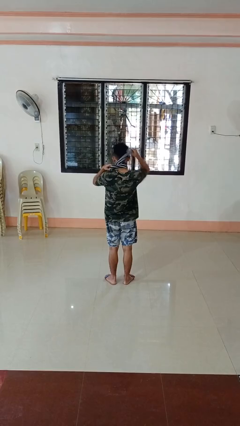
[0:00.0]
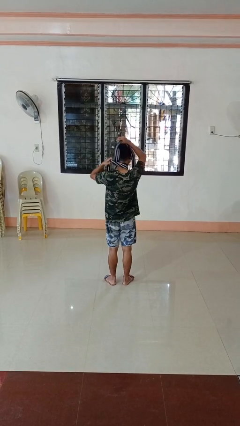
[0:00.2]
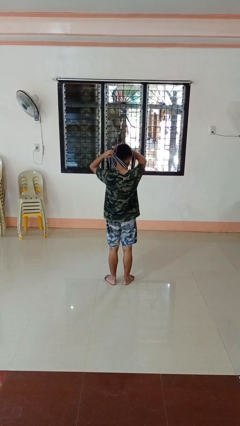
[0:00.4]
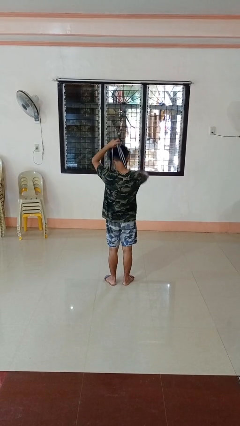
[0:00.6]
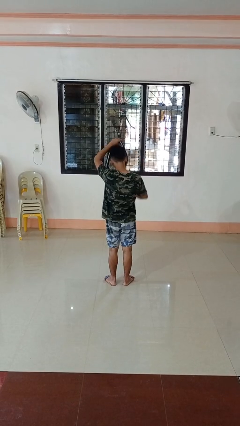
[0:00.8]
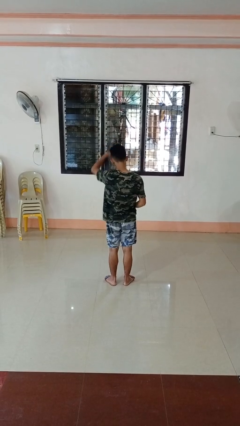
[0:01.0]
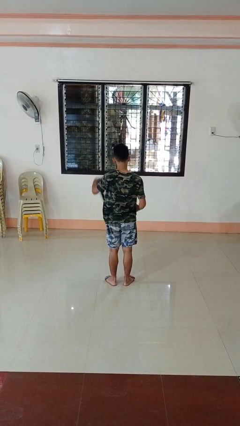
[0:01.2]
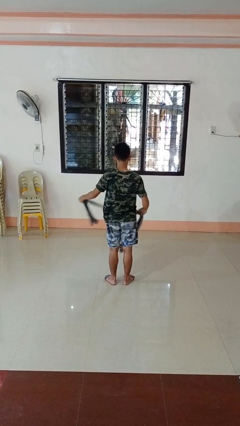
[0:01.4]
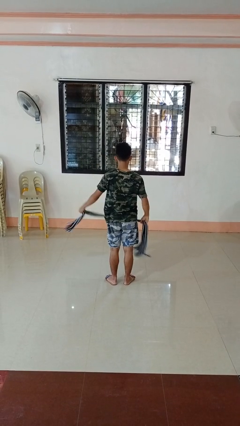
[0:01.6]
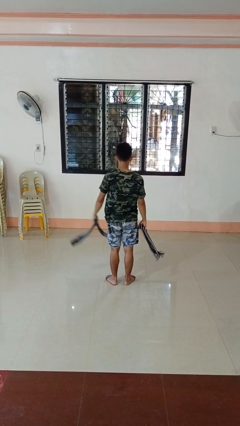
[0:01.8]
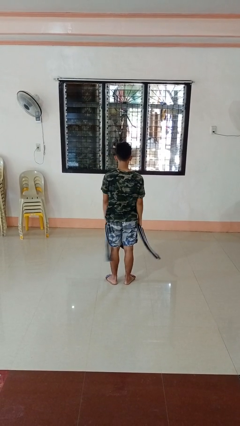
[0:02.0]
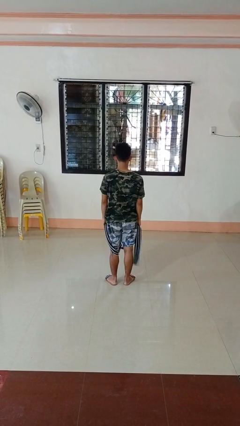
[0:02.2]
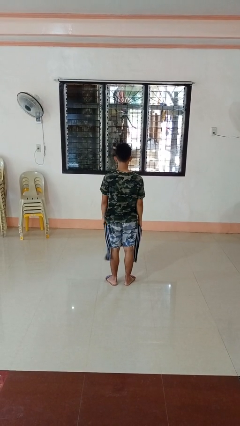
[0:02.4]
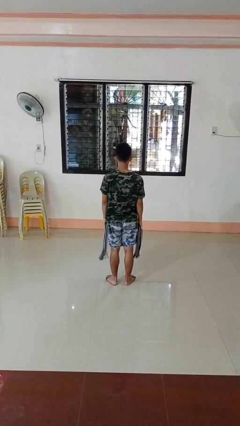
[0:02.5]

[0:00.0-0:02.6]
person takes off scarf

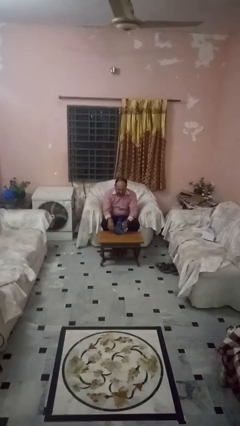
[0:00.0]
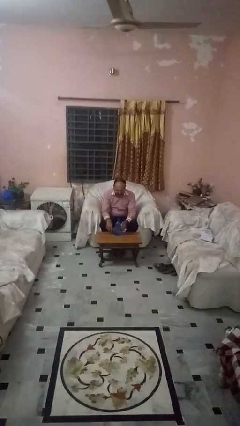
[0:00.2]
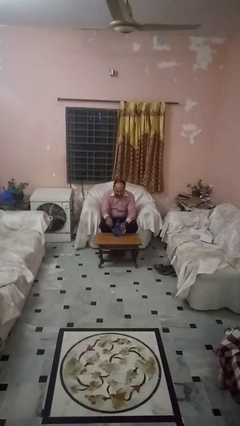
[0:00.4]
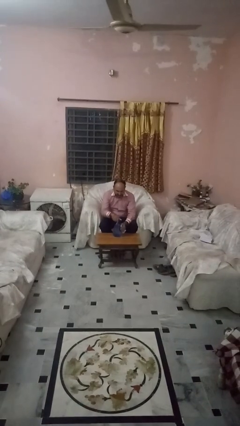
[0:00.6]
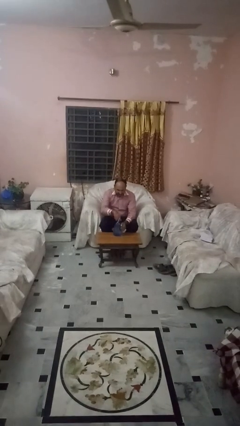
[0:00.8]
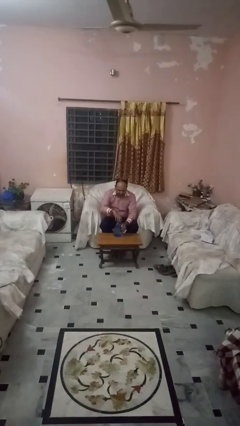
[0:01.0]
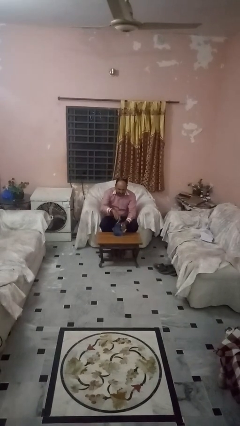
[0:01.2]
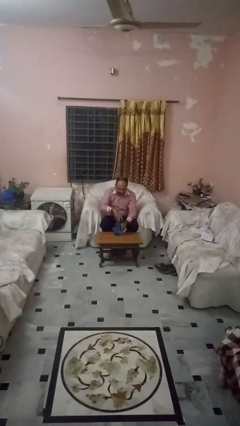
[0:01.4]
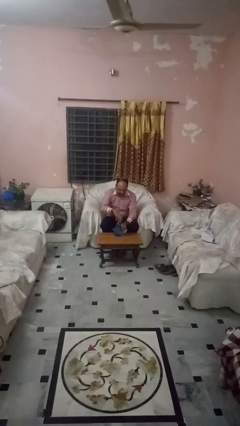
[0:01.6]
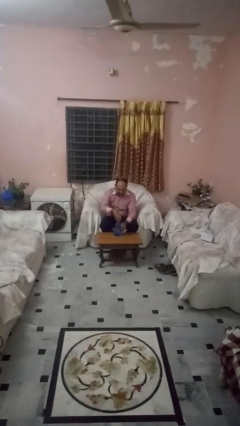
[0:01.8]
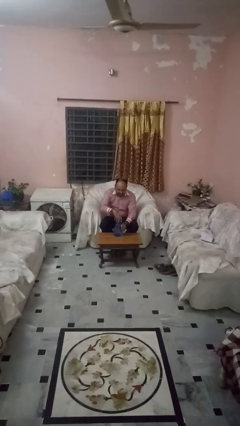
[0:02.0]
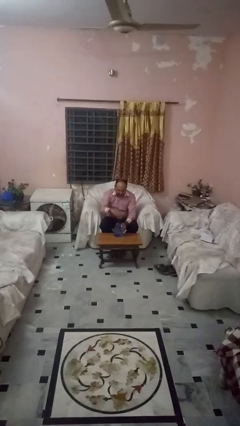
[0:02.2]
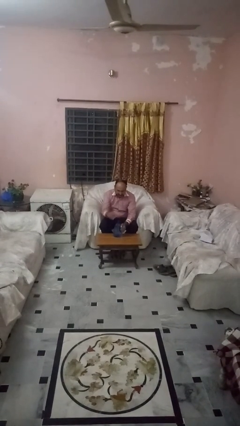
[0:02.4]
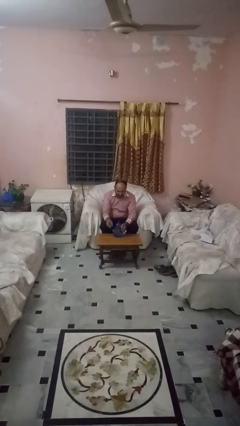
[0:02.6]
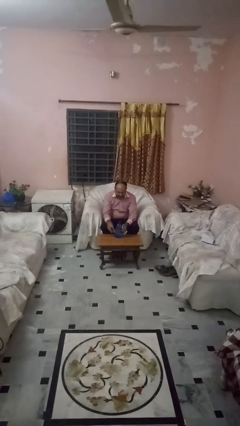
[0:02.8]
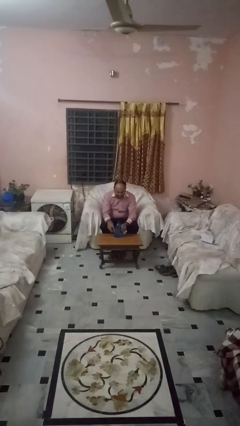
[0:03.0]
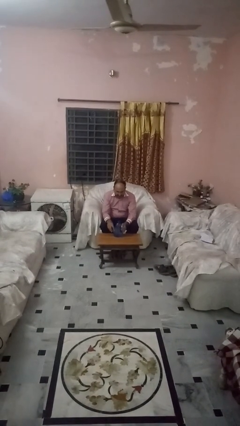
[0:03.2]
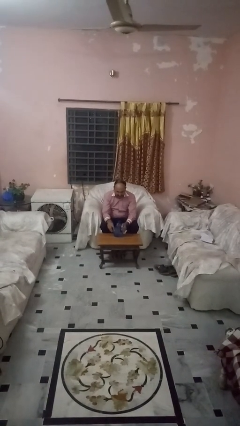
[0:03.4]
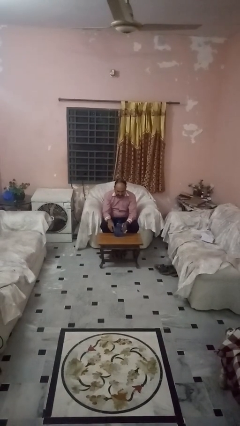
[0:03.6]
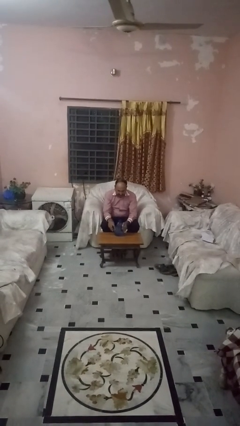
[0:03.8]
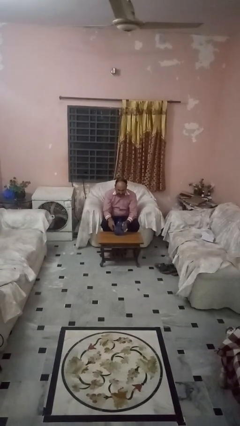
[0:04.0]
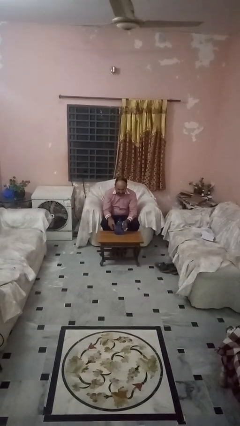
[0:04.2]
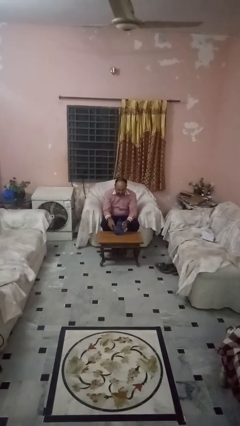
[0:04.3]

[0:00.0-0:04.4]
person unscrews lid from bottle

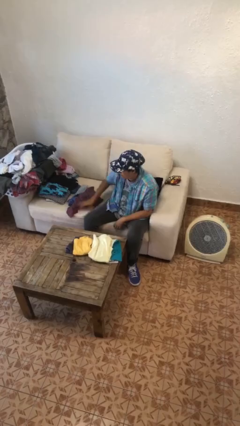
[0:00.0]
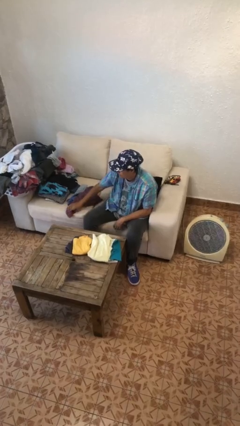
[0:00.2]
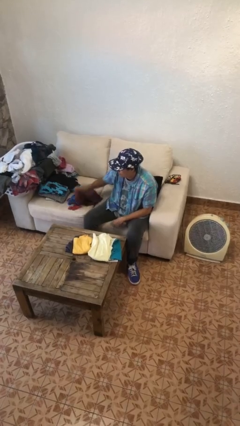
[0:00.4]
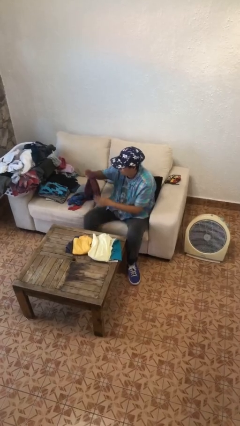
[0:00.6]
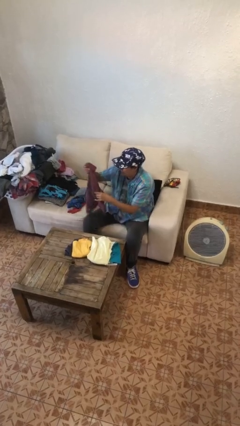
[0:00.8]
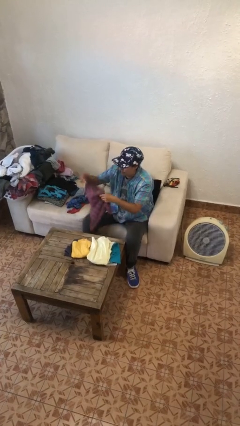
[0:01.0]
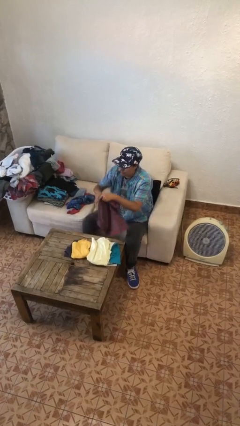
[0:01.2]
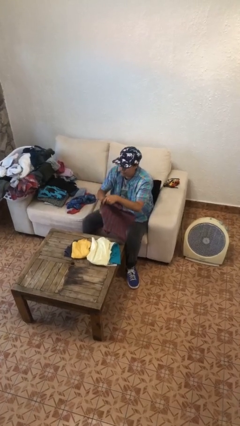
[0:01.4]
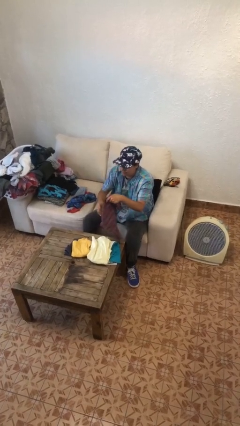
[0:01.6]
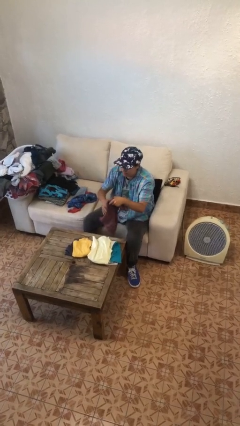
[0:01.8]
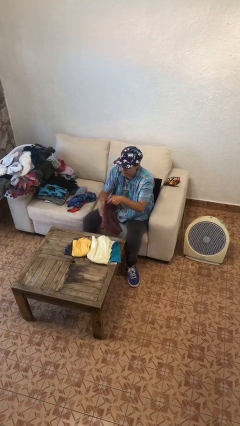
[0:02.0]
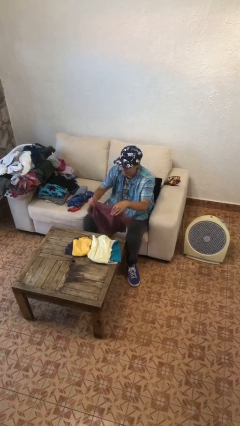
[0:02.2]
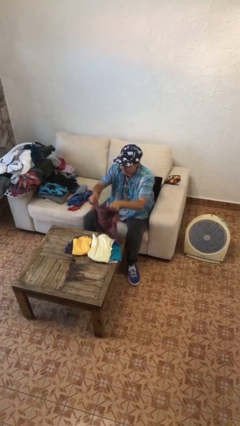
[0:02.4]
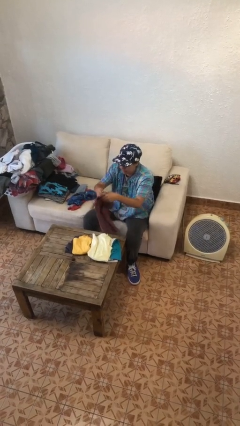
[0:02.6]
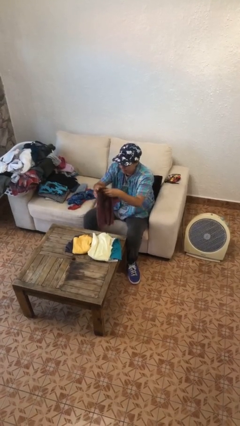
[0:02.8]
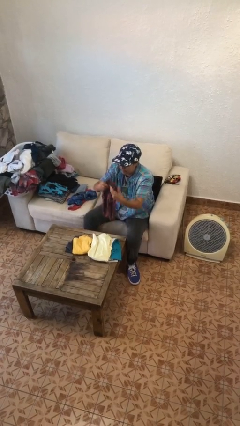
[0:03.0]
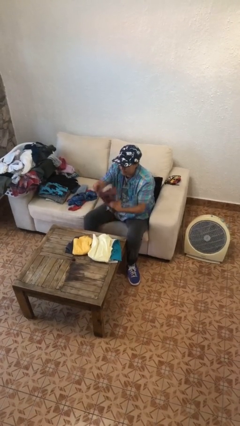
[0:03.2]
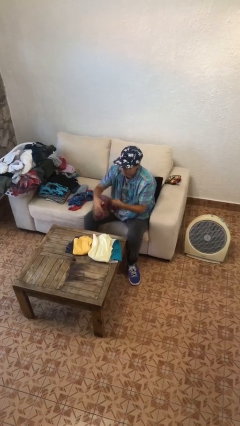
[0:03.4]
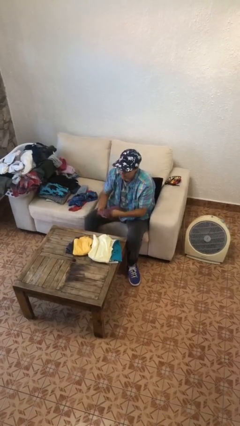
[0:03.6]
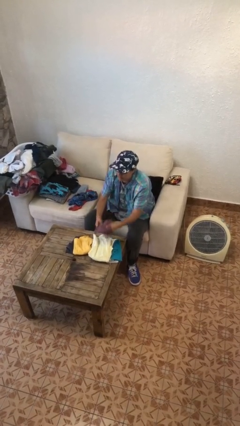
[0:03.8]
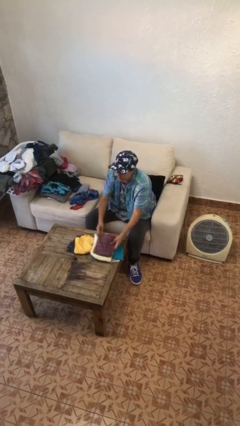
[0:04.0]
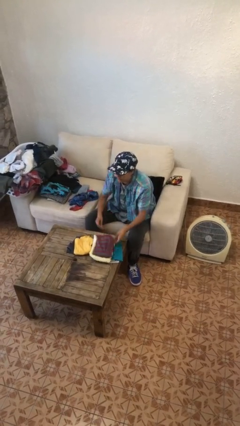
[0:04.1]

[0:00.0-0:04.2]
person folds shirt

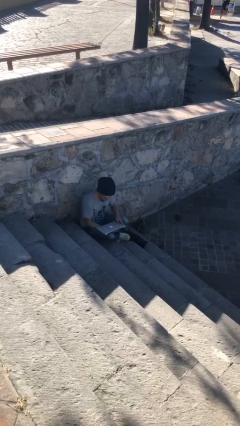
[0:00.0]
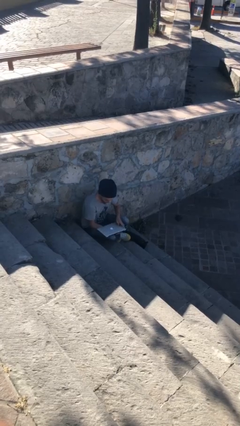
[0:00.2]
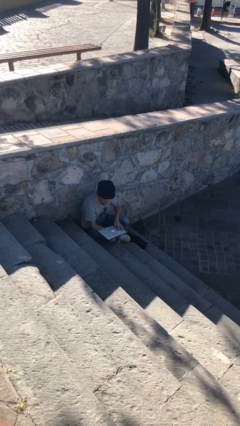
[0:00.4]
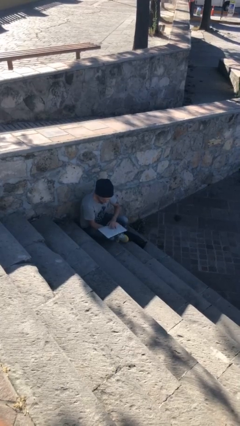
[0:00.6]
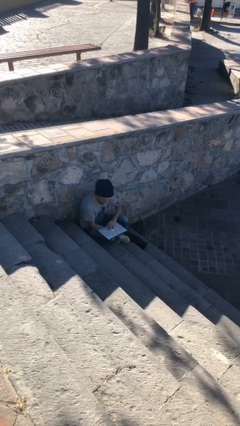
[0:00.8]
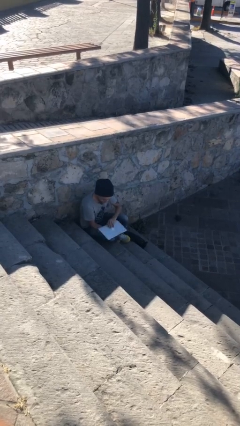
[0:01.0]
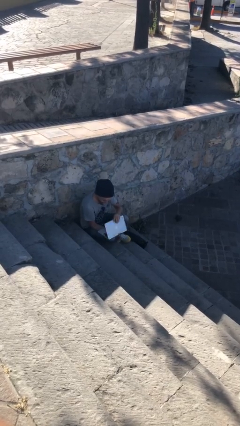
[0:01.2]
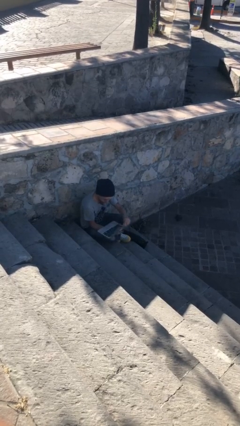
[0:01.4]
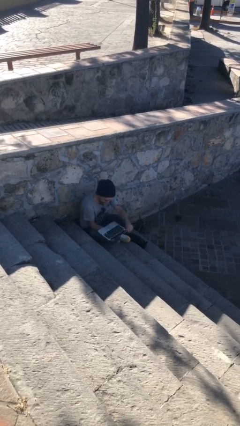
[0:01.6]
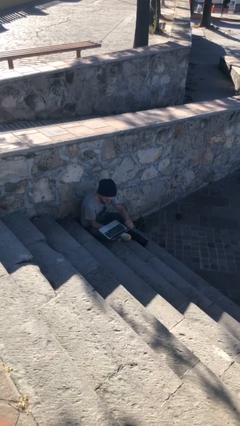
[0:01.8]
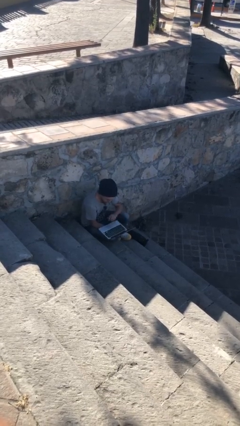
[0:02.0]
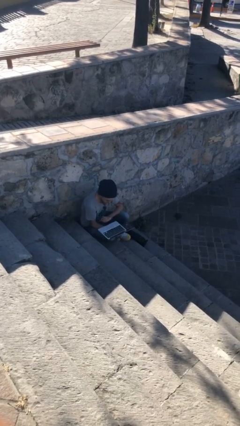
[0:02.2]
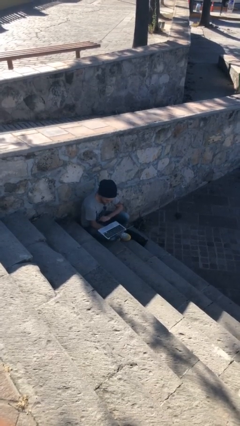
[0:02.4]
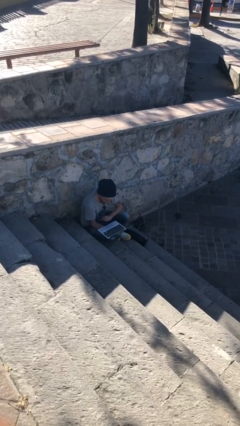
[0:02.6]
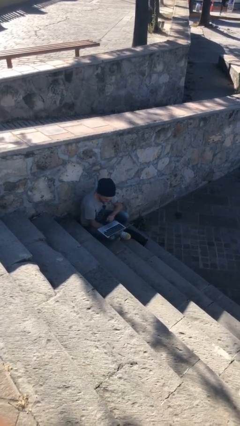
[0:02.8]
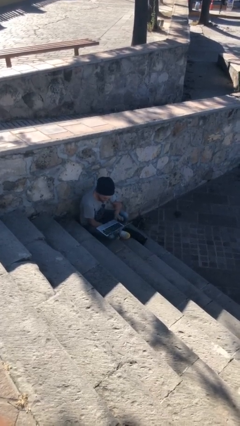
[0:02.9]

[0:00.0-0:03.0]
person interacts with laptop

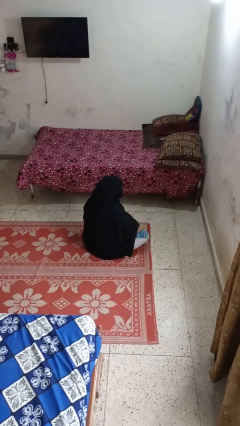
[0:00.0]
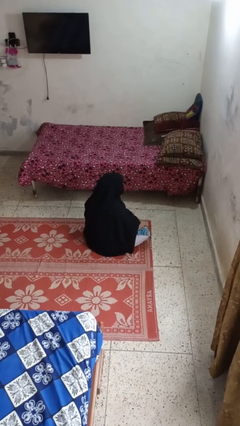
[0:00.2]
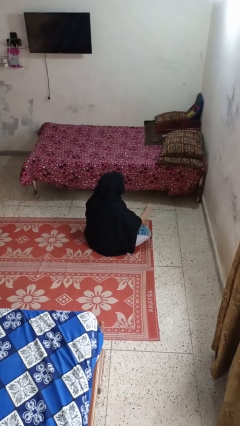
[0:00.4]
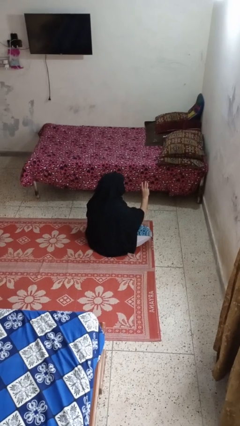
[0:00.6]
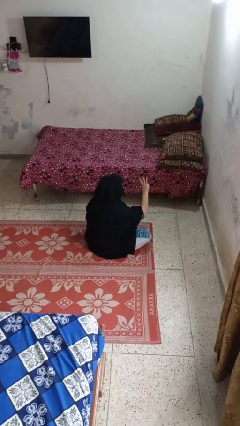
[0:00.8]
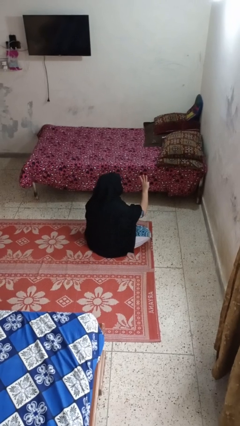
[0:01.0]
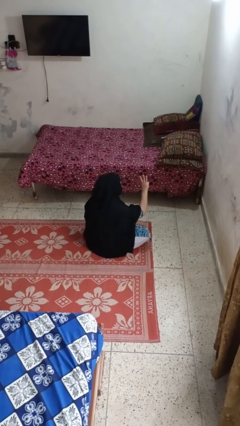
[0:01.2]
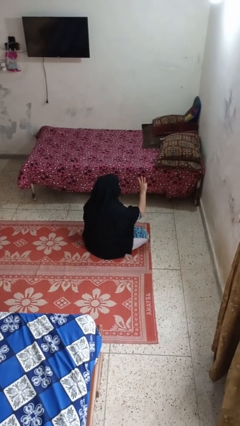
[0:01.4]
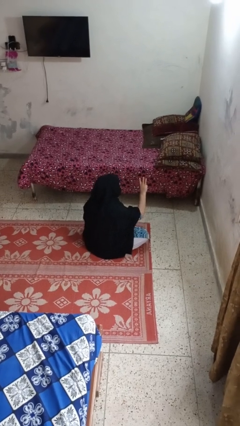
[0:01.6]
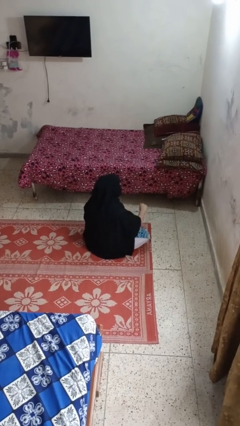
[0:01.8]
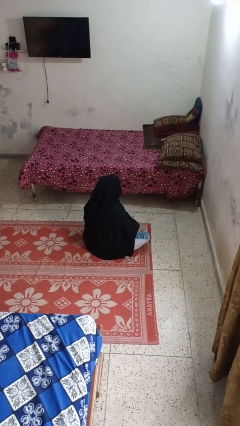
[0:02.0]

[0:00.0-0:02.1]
person gestures number three

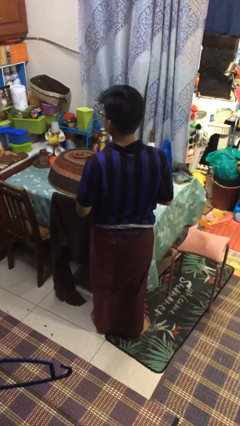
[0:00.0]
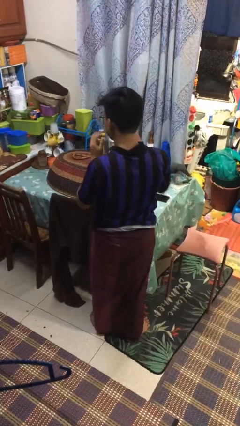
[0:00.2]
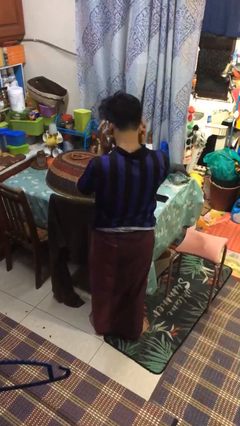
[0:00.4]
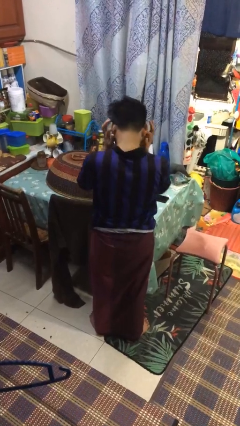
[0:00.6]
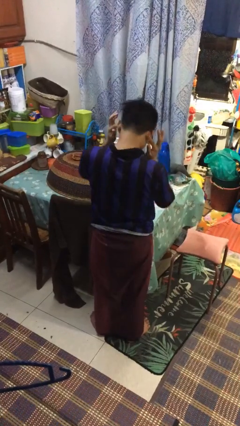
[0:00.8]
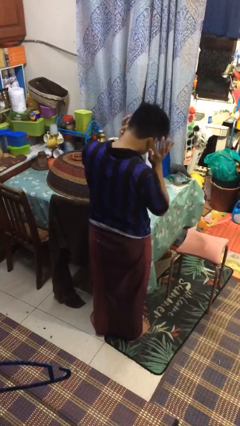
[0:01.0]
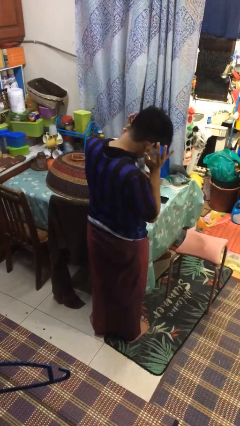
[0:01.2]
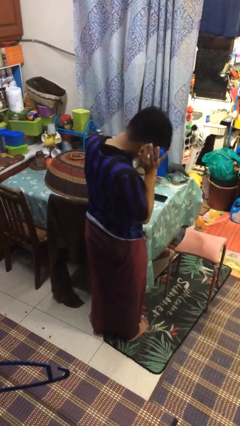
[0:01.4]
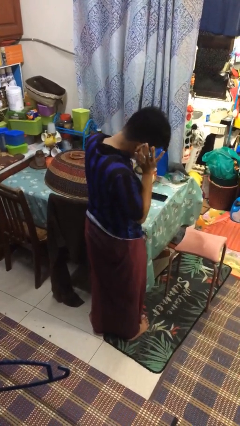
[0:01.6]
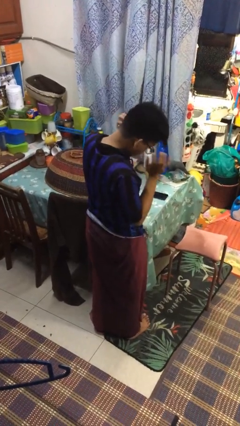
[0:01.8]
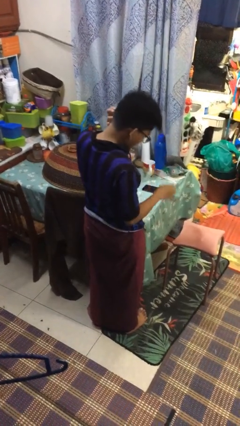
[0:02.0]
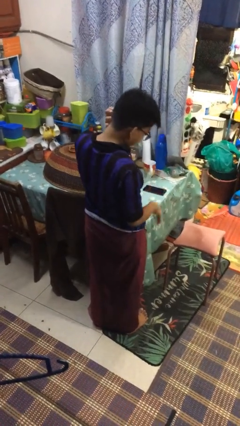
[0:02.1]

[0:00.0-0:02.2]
person puts fingers in ear
